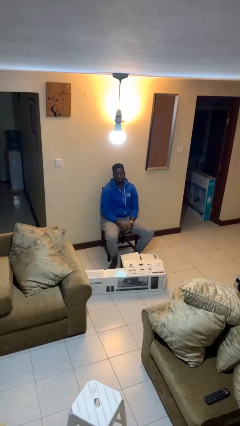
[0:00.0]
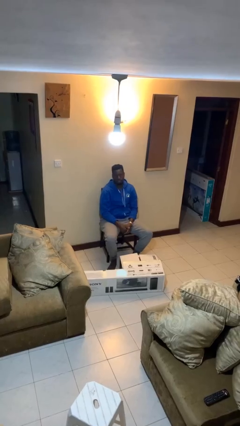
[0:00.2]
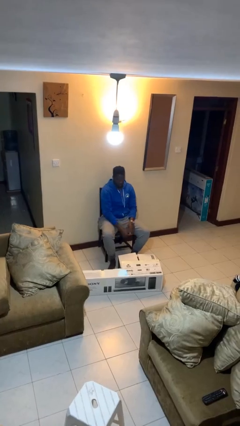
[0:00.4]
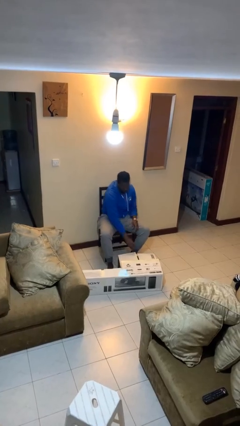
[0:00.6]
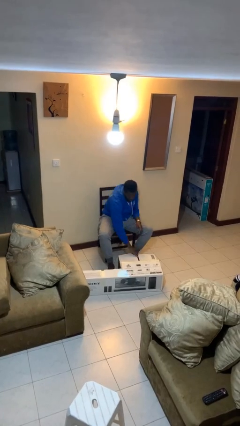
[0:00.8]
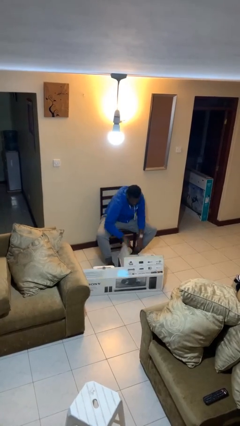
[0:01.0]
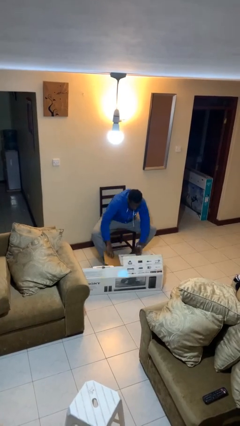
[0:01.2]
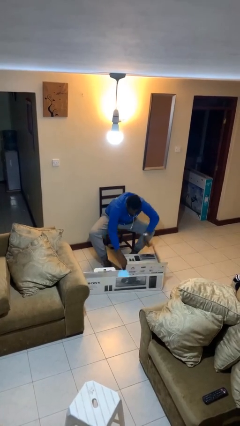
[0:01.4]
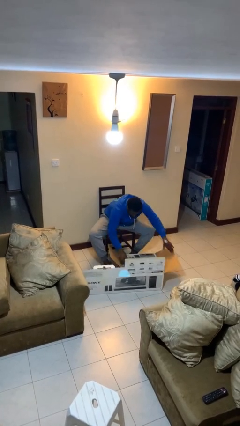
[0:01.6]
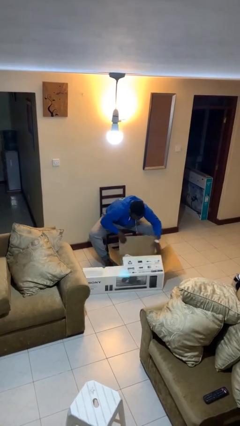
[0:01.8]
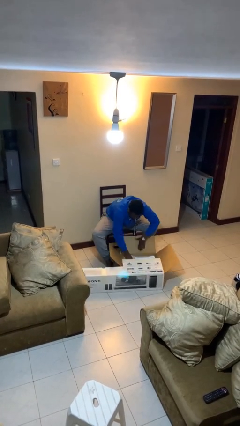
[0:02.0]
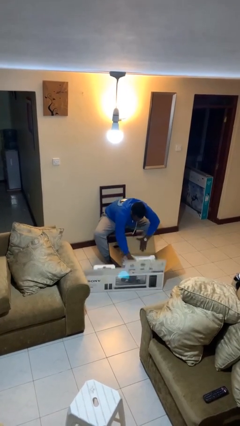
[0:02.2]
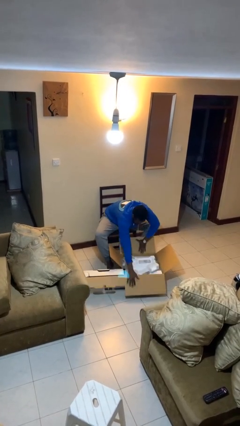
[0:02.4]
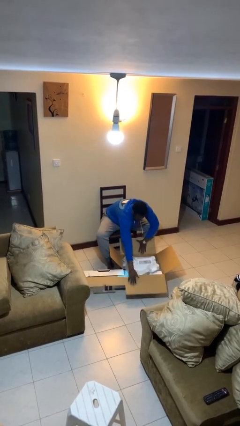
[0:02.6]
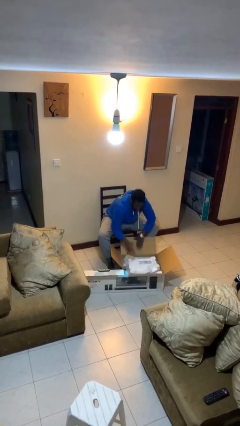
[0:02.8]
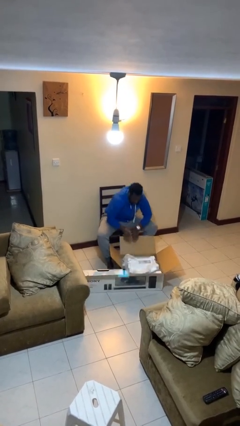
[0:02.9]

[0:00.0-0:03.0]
person opens box

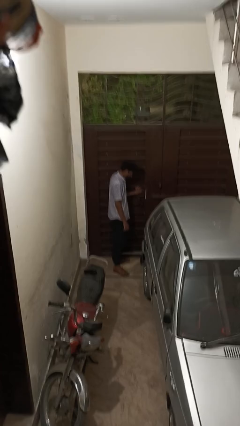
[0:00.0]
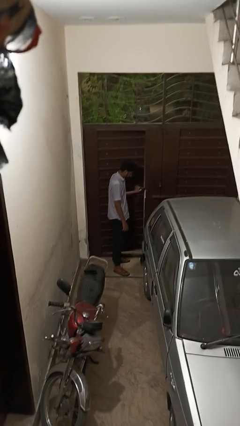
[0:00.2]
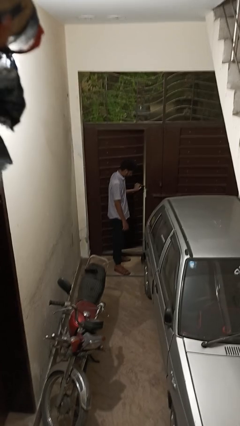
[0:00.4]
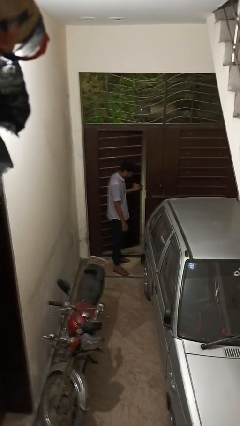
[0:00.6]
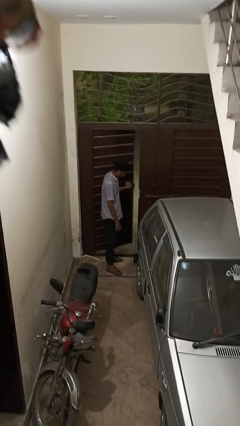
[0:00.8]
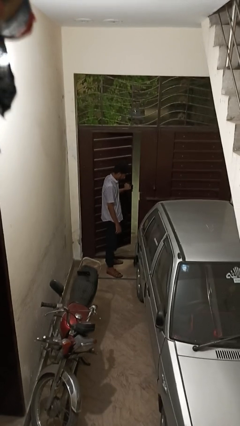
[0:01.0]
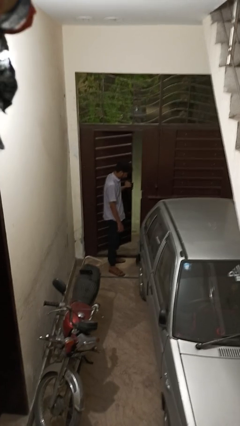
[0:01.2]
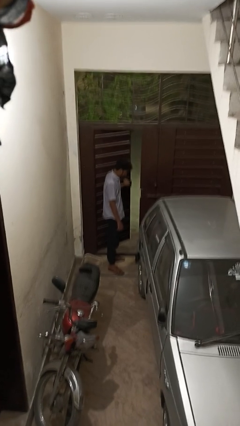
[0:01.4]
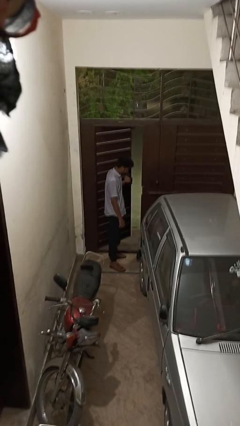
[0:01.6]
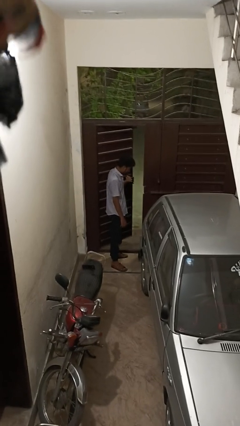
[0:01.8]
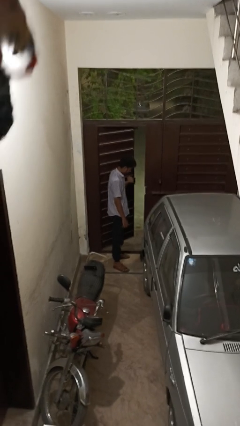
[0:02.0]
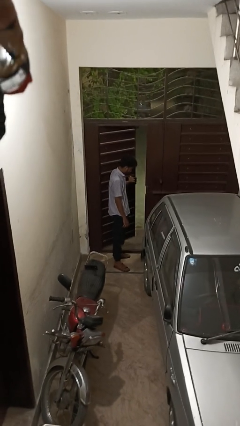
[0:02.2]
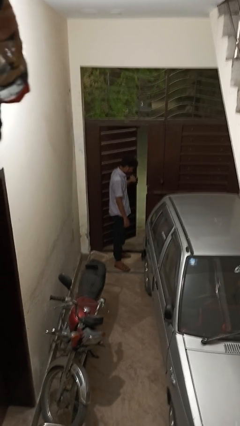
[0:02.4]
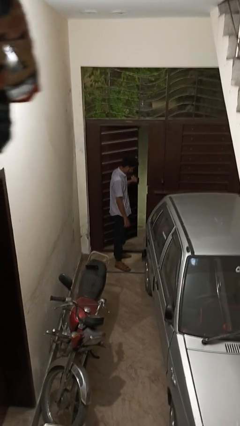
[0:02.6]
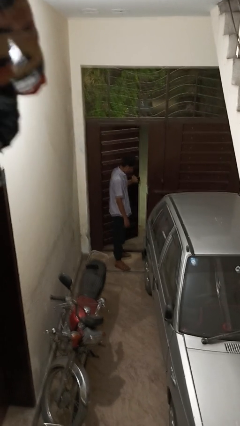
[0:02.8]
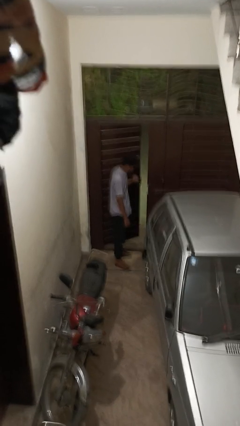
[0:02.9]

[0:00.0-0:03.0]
person opens gate

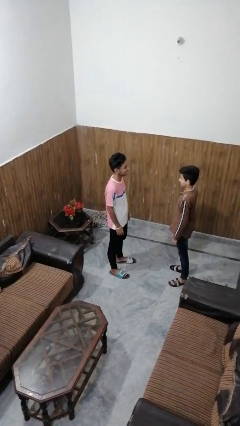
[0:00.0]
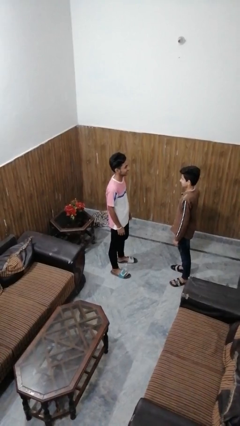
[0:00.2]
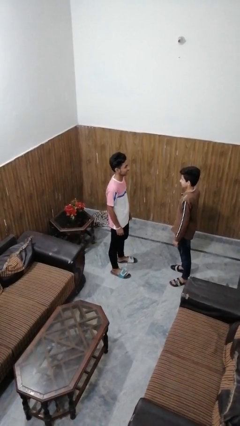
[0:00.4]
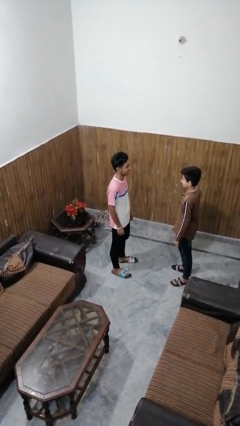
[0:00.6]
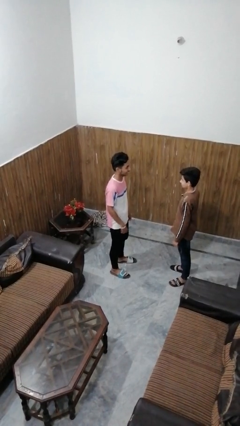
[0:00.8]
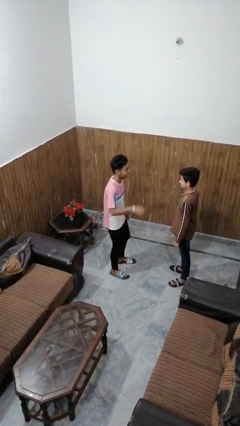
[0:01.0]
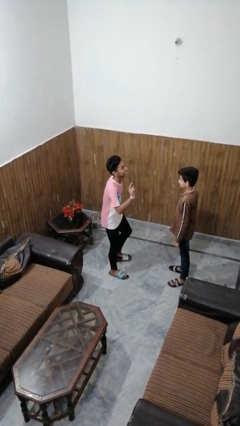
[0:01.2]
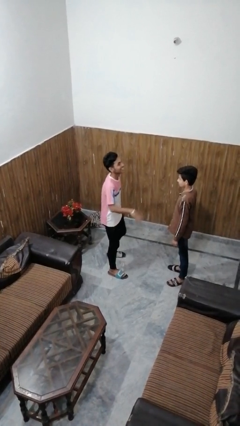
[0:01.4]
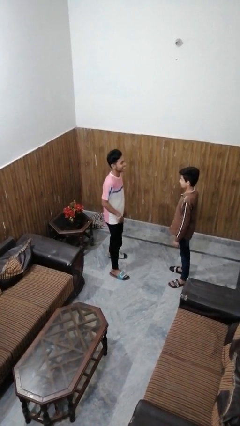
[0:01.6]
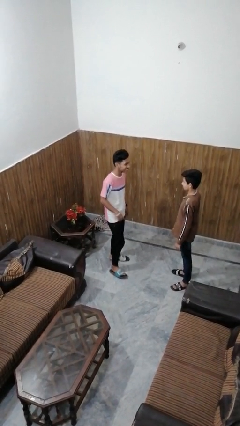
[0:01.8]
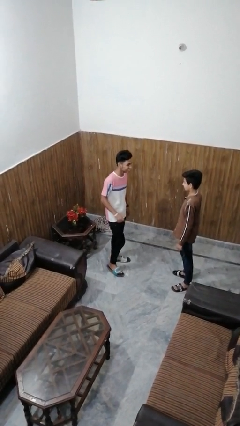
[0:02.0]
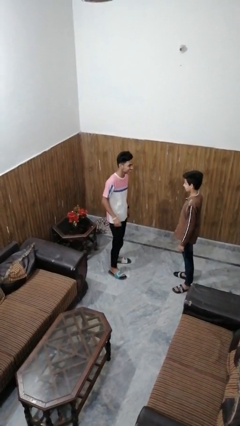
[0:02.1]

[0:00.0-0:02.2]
person laughs with person

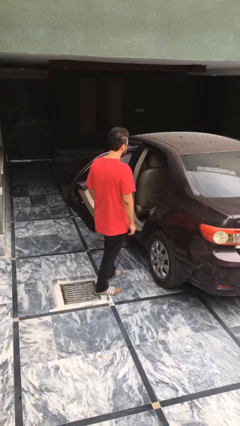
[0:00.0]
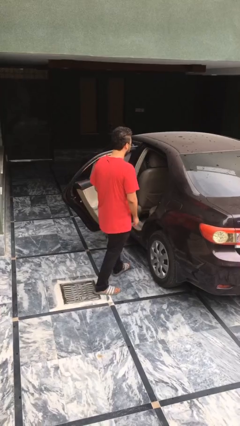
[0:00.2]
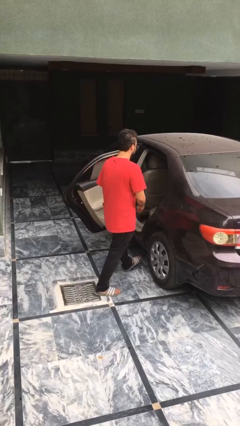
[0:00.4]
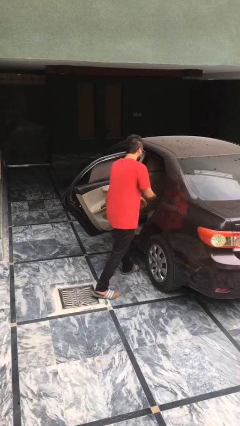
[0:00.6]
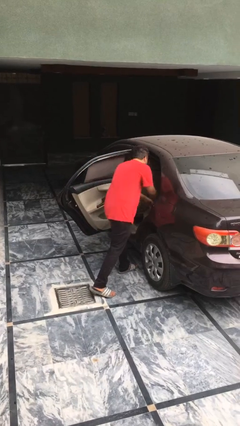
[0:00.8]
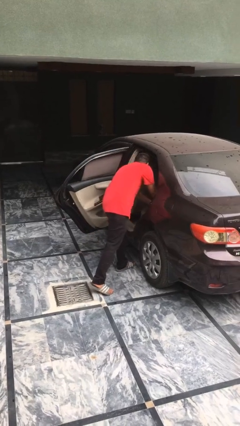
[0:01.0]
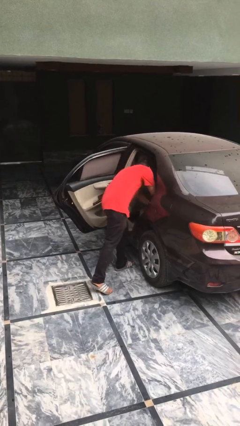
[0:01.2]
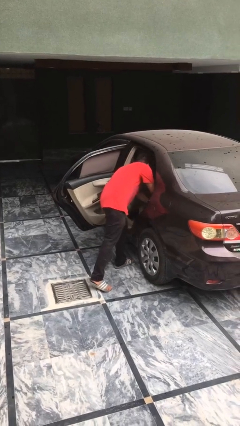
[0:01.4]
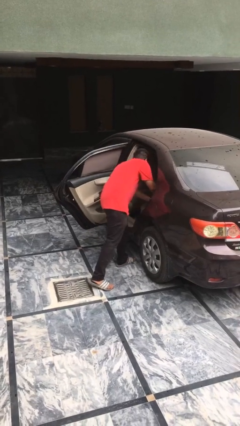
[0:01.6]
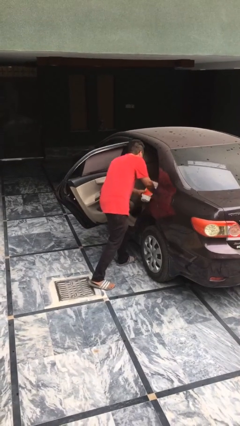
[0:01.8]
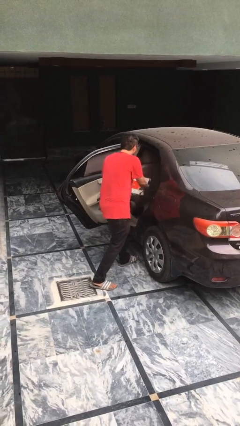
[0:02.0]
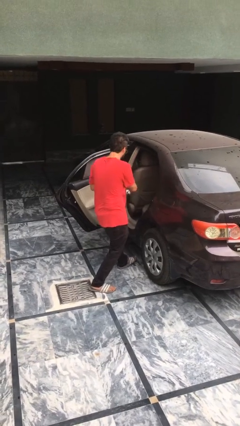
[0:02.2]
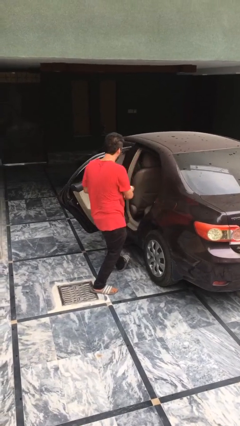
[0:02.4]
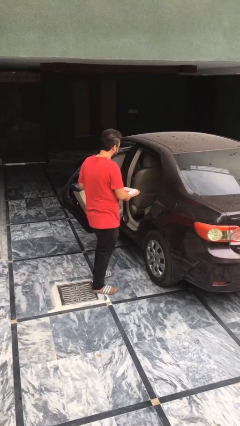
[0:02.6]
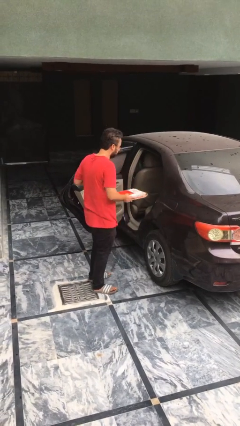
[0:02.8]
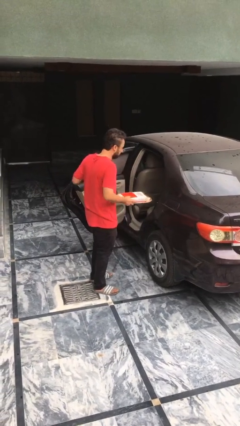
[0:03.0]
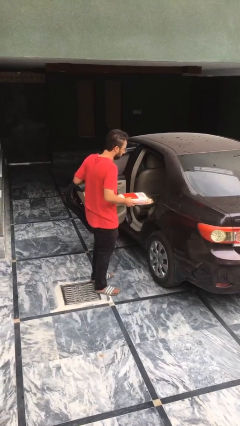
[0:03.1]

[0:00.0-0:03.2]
person unloads car

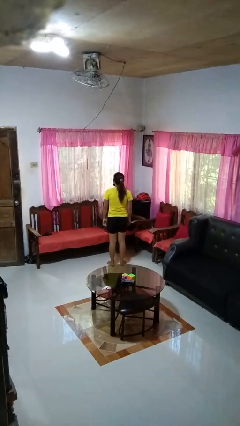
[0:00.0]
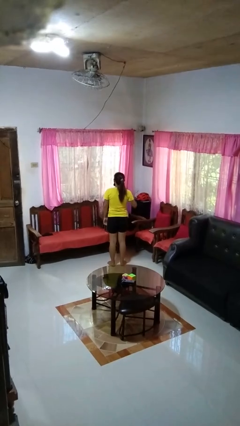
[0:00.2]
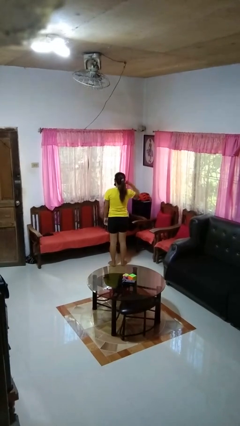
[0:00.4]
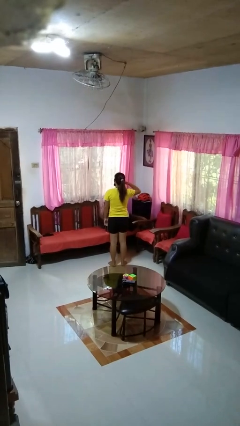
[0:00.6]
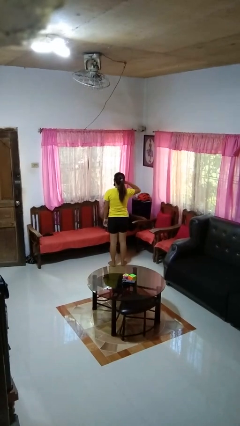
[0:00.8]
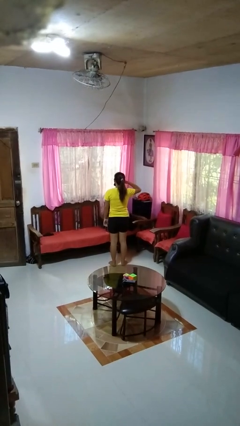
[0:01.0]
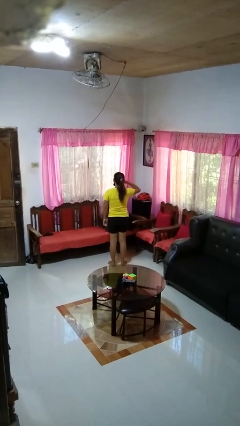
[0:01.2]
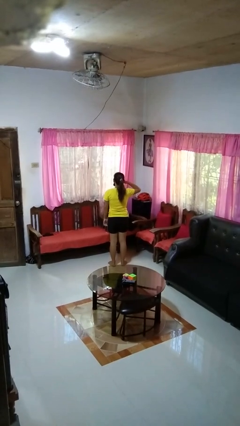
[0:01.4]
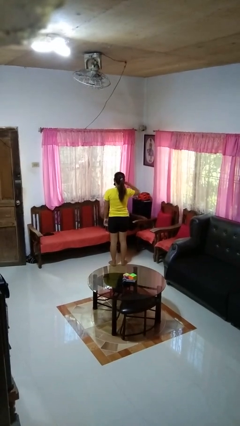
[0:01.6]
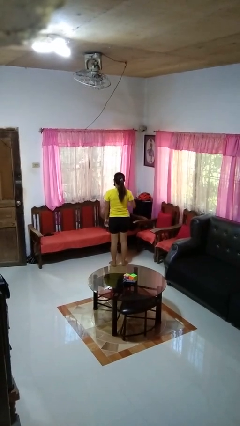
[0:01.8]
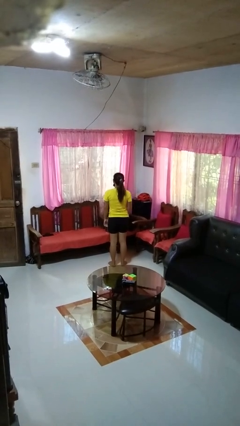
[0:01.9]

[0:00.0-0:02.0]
person gestures call me

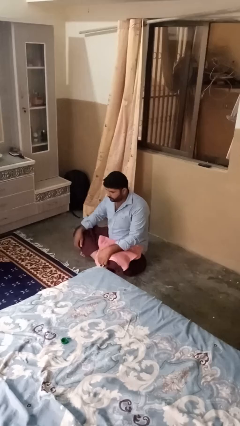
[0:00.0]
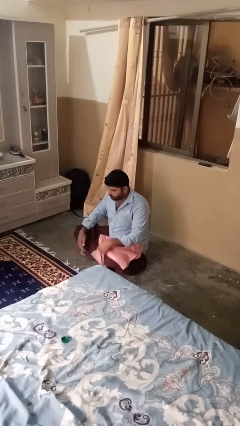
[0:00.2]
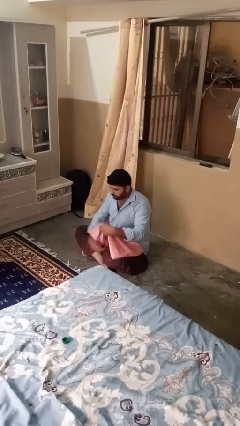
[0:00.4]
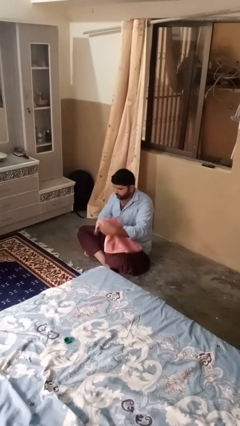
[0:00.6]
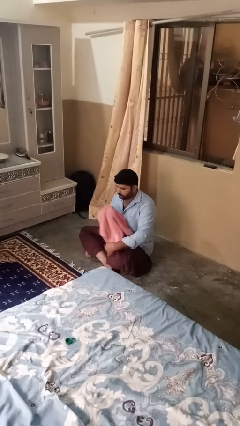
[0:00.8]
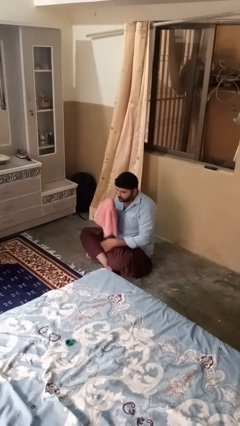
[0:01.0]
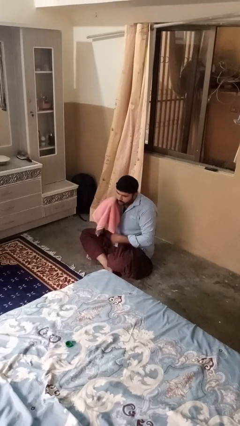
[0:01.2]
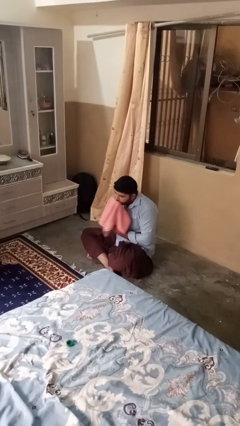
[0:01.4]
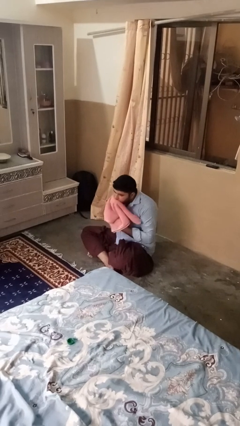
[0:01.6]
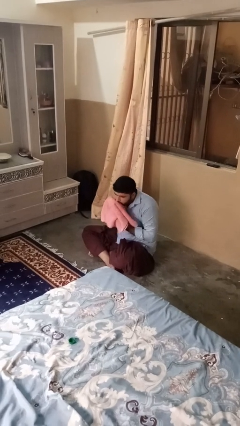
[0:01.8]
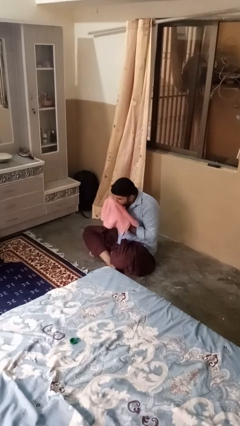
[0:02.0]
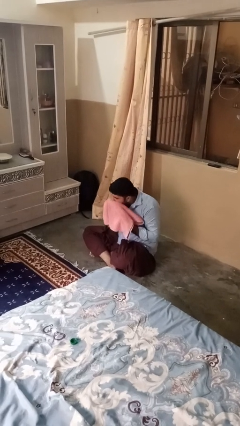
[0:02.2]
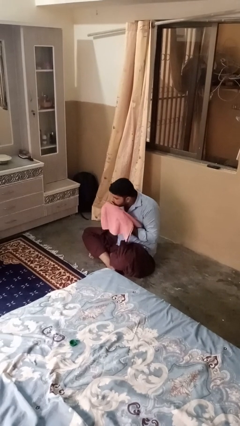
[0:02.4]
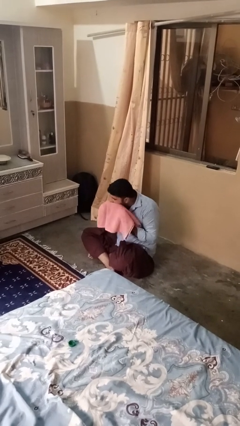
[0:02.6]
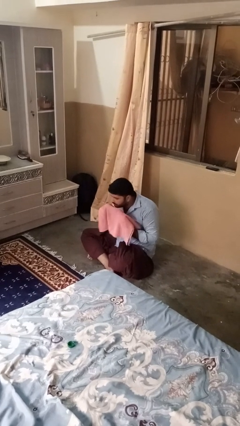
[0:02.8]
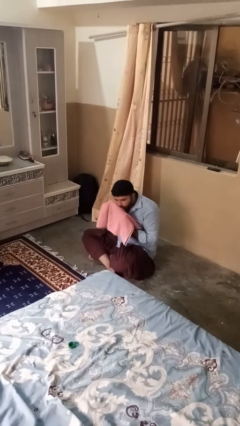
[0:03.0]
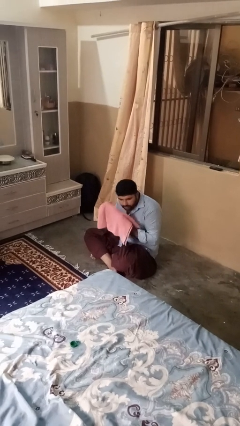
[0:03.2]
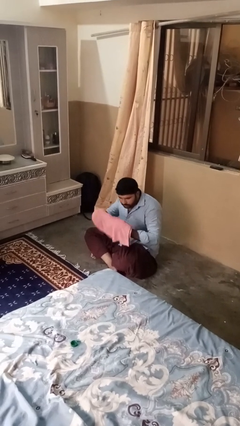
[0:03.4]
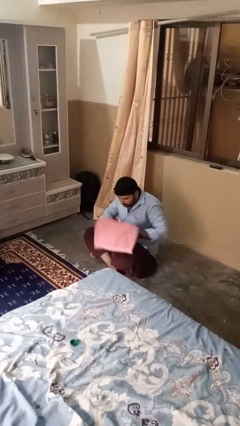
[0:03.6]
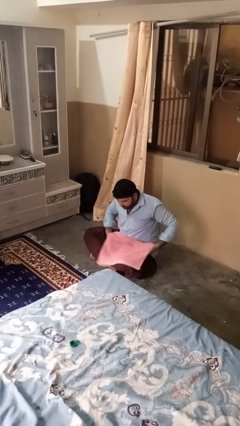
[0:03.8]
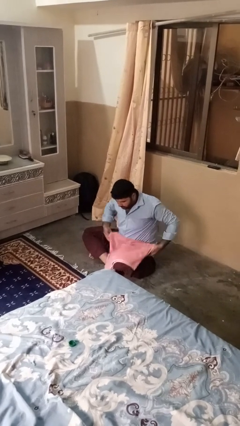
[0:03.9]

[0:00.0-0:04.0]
person wipes mouth with napkin

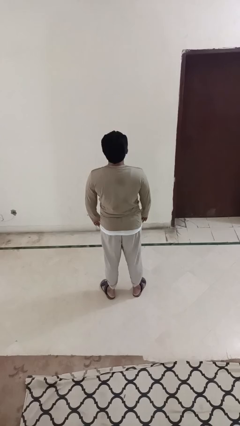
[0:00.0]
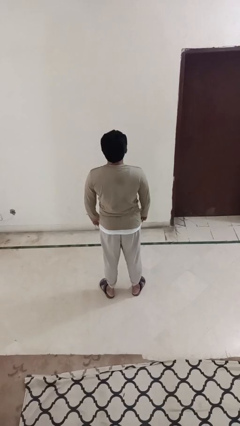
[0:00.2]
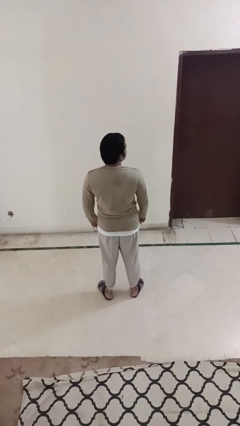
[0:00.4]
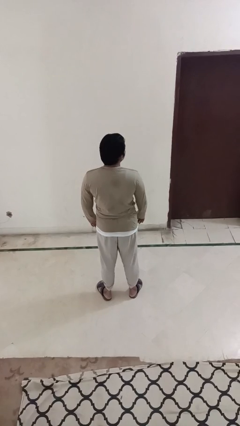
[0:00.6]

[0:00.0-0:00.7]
person shakes head
